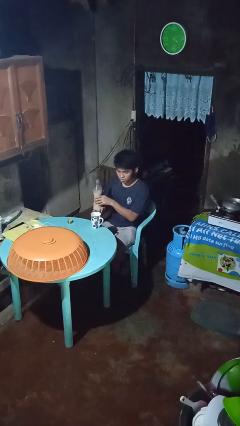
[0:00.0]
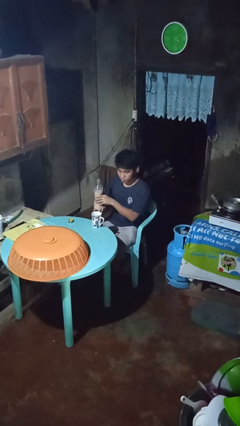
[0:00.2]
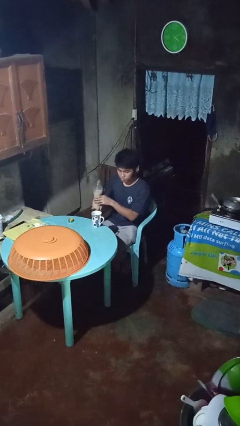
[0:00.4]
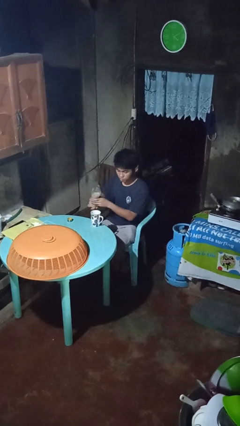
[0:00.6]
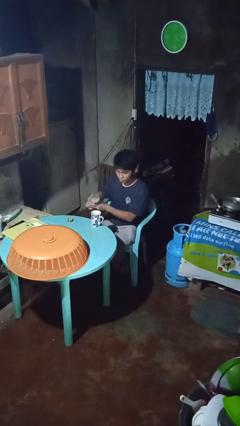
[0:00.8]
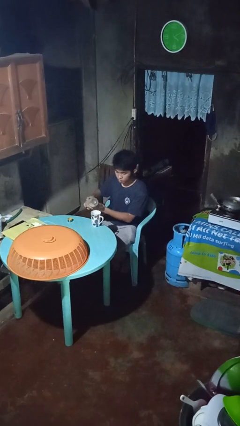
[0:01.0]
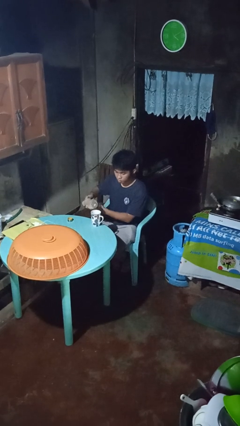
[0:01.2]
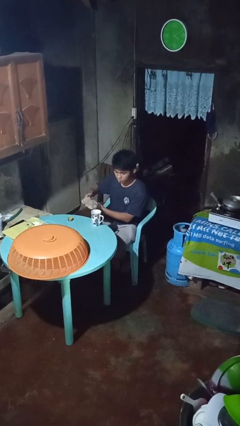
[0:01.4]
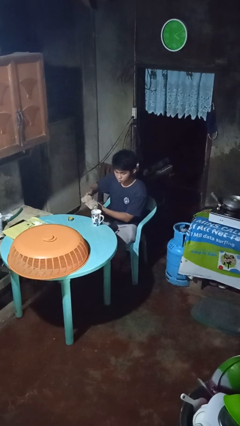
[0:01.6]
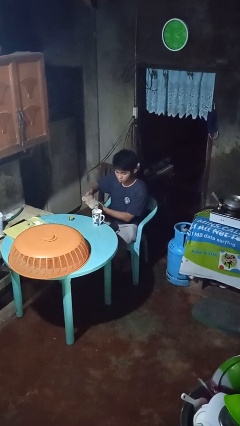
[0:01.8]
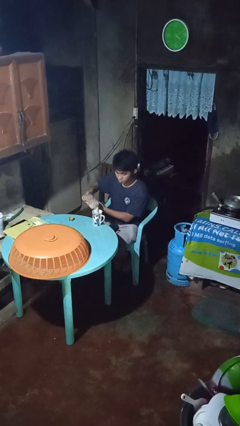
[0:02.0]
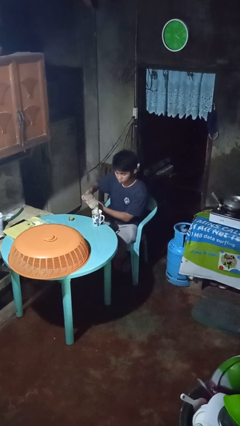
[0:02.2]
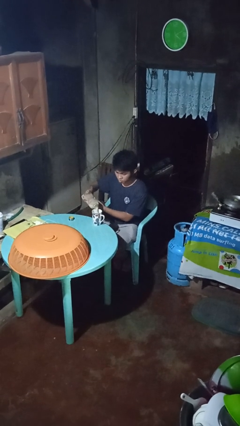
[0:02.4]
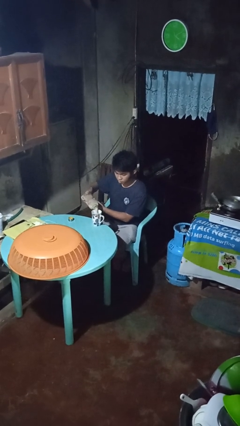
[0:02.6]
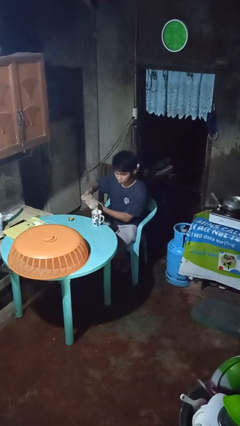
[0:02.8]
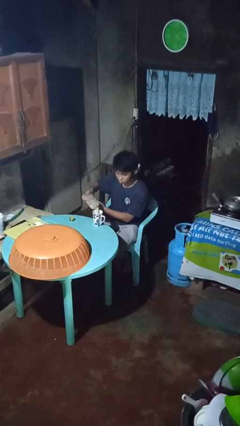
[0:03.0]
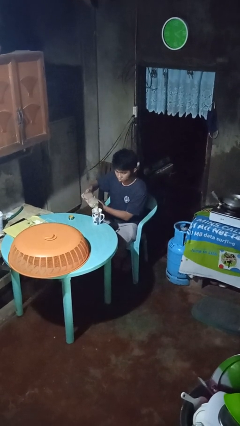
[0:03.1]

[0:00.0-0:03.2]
person pours coffee into mug

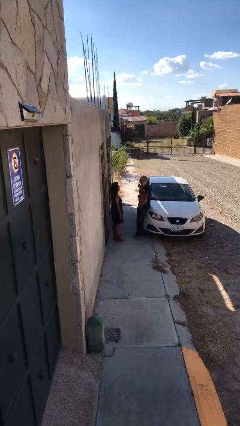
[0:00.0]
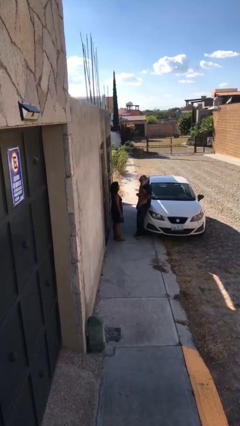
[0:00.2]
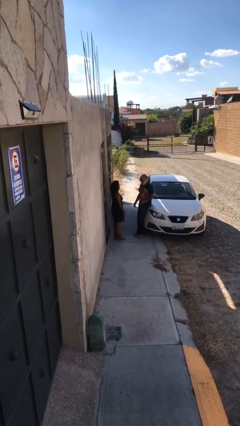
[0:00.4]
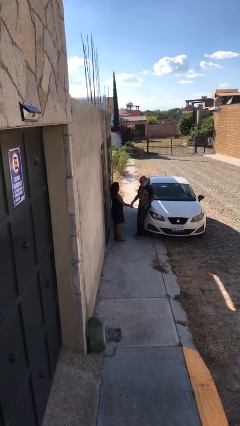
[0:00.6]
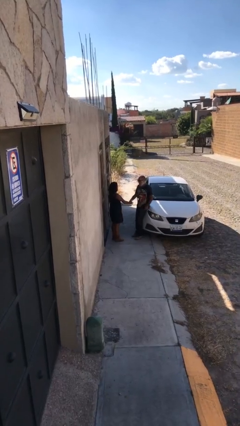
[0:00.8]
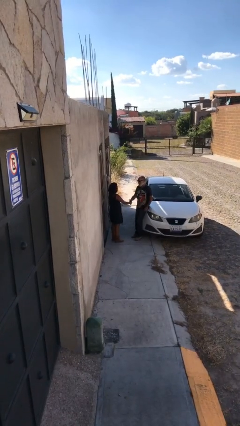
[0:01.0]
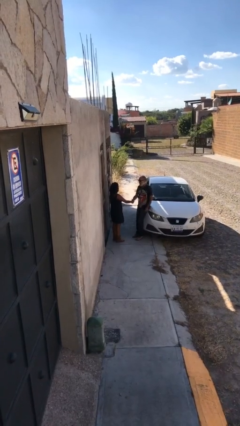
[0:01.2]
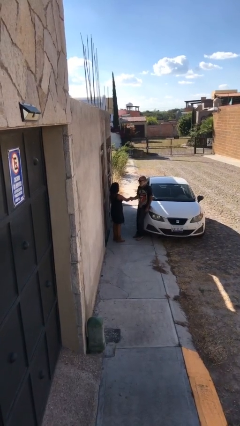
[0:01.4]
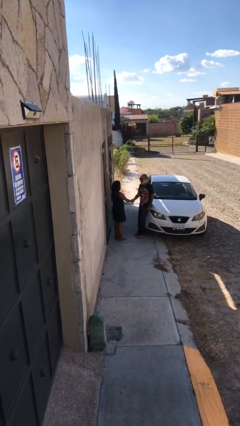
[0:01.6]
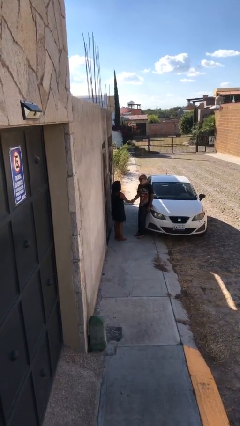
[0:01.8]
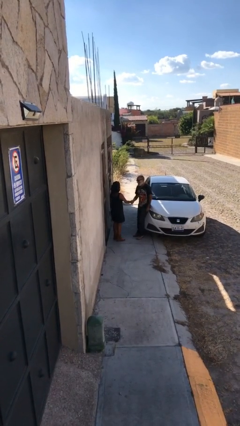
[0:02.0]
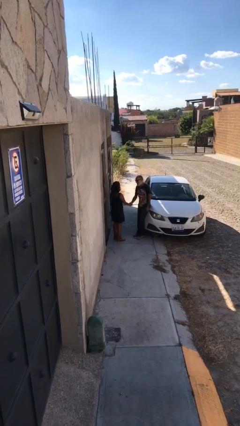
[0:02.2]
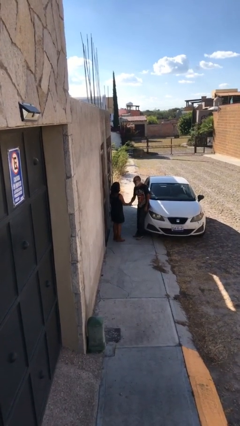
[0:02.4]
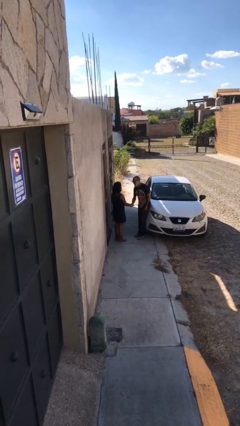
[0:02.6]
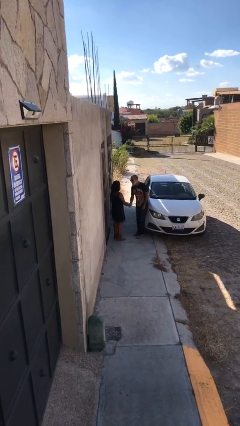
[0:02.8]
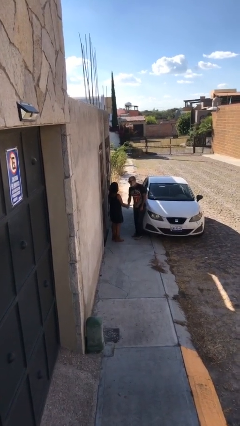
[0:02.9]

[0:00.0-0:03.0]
person shakes hand

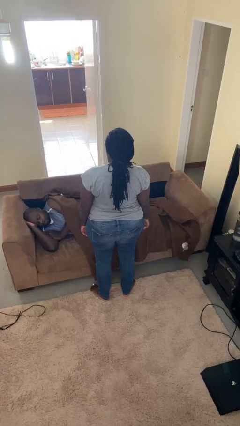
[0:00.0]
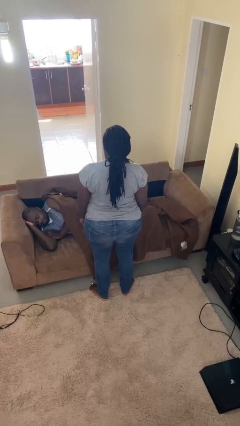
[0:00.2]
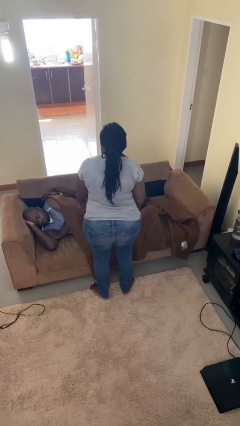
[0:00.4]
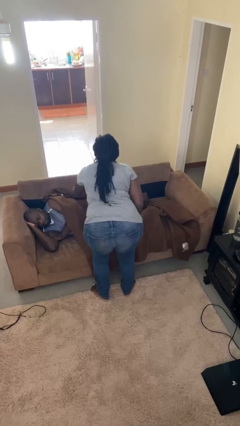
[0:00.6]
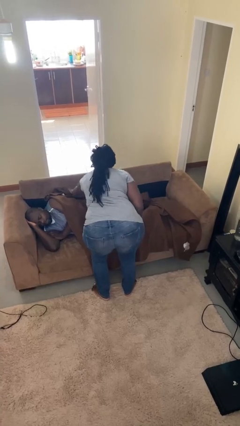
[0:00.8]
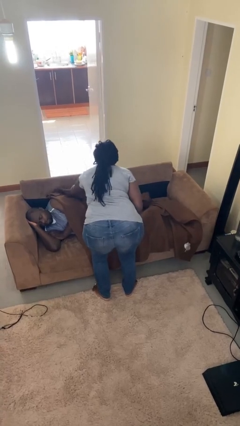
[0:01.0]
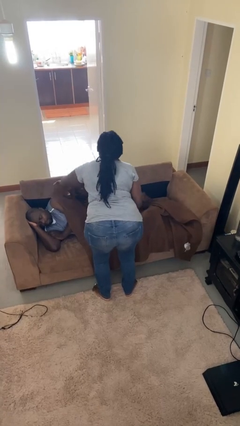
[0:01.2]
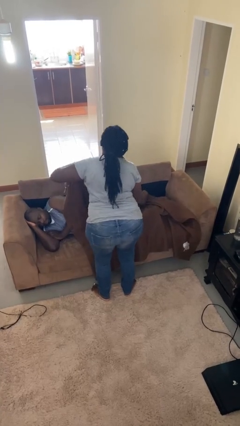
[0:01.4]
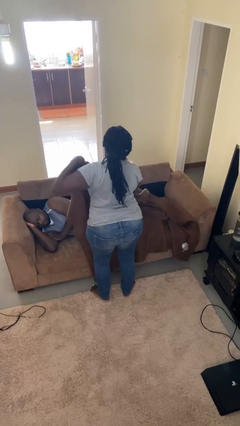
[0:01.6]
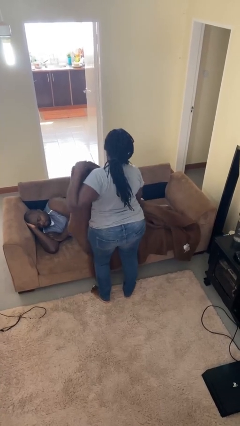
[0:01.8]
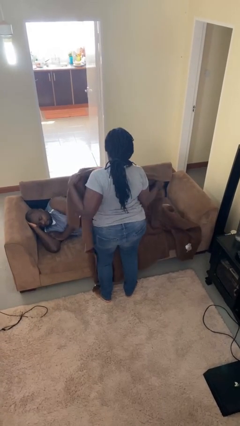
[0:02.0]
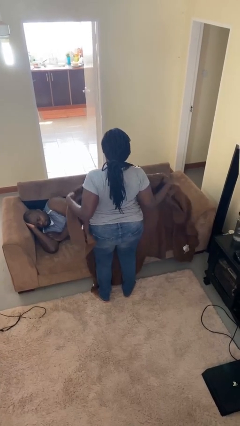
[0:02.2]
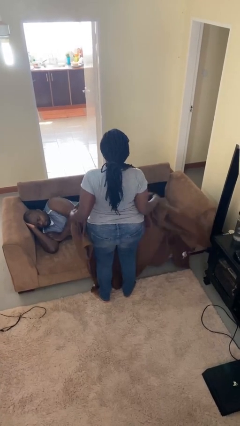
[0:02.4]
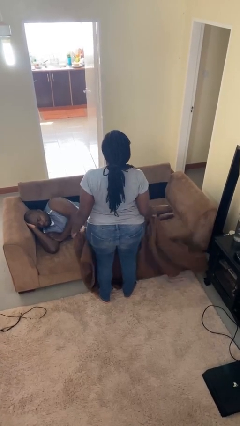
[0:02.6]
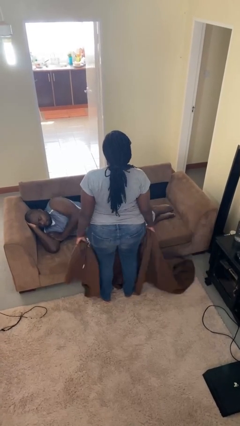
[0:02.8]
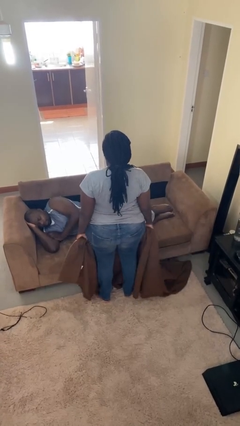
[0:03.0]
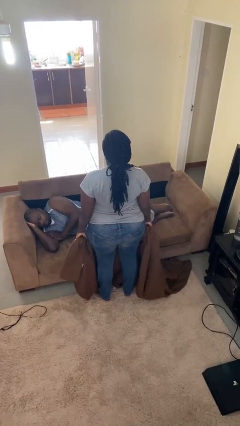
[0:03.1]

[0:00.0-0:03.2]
person uncovers friend with blanket

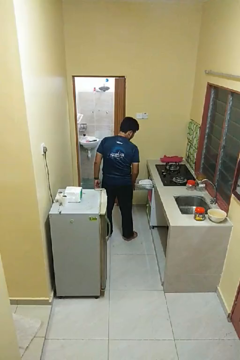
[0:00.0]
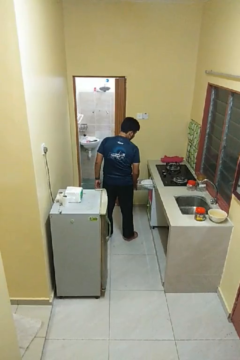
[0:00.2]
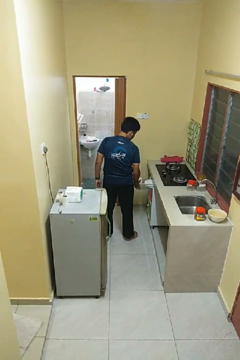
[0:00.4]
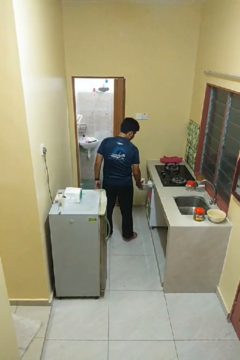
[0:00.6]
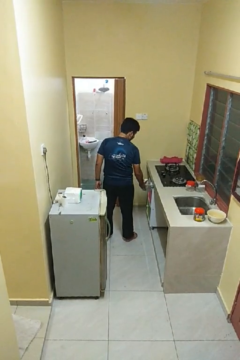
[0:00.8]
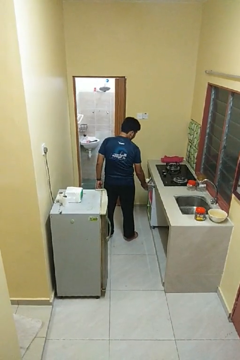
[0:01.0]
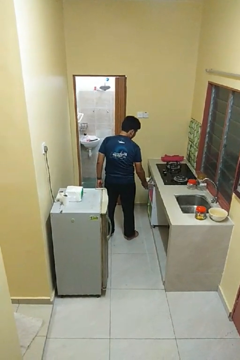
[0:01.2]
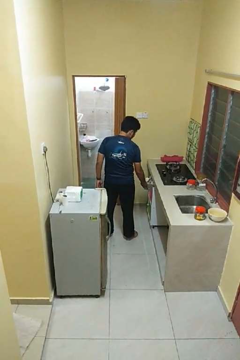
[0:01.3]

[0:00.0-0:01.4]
person closes kitchen drawer

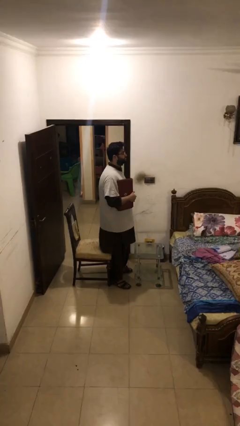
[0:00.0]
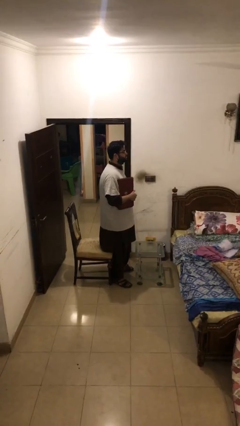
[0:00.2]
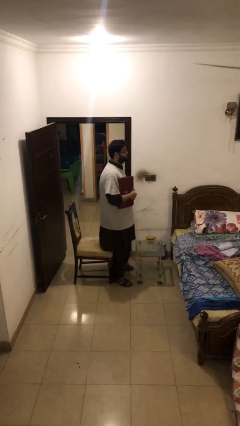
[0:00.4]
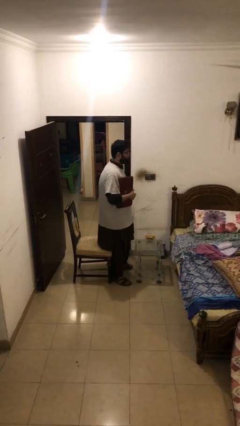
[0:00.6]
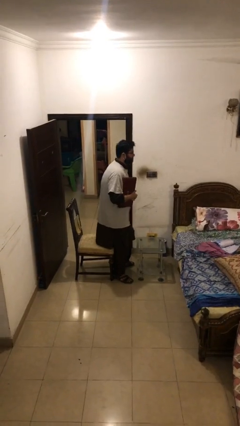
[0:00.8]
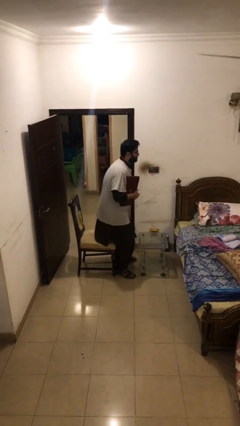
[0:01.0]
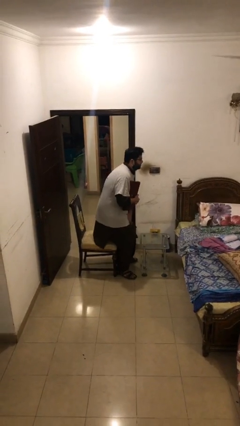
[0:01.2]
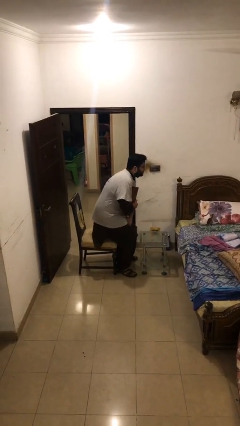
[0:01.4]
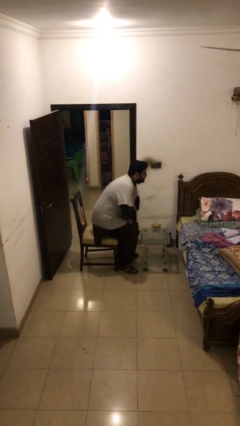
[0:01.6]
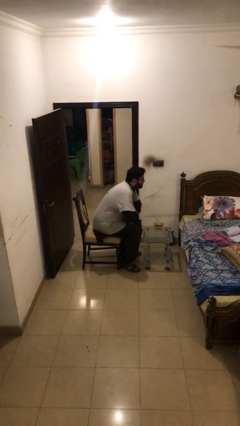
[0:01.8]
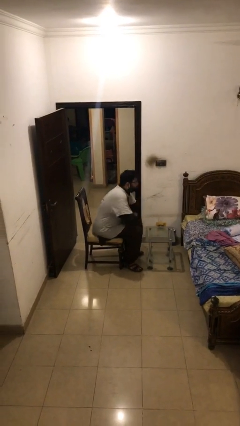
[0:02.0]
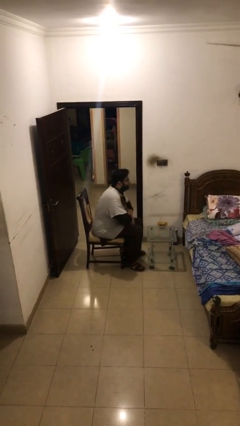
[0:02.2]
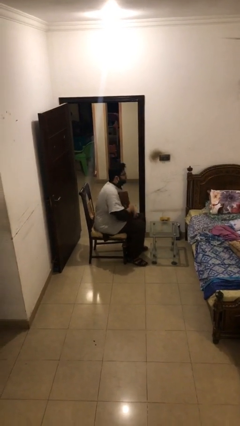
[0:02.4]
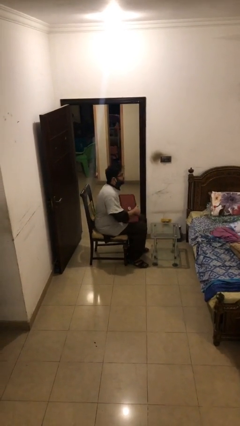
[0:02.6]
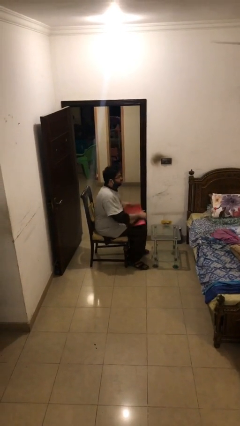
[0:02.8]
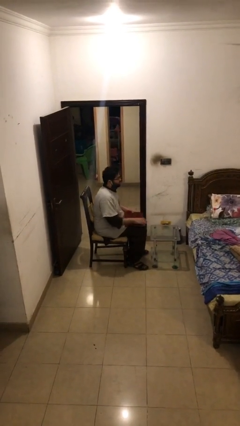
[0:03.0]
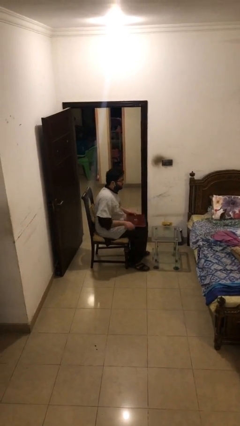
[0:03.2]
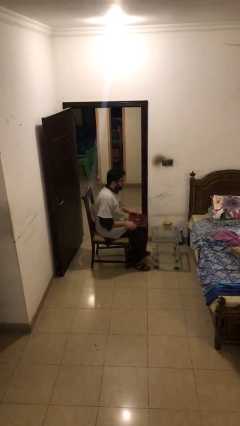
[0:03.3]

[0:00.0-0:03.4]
person sits down

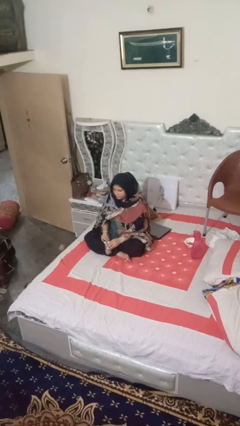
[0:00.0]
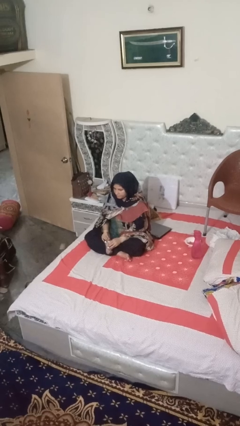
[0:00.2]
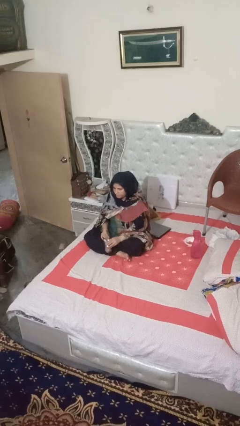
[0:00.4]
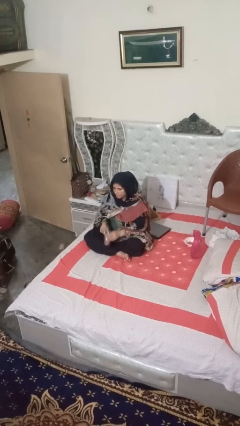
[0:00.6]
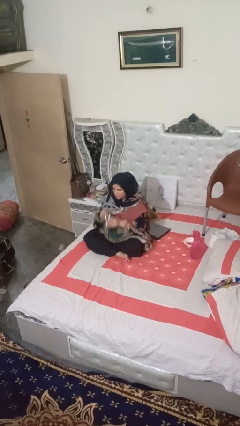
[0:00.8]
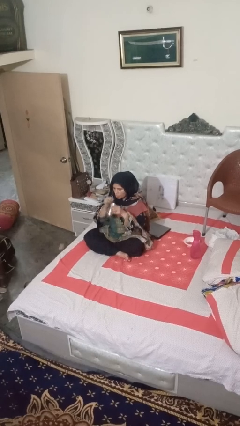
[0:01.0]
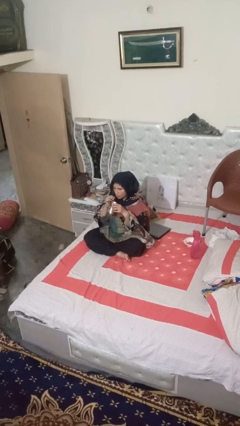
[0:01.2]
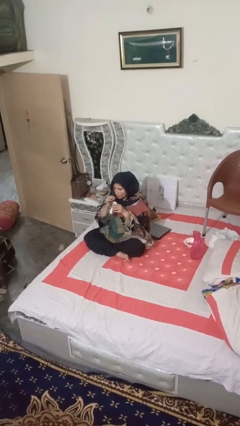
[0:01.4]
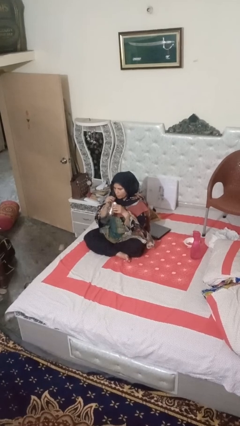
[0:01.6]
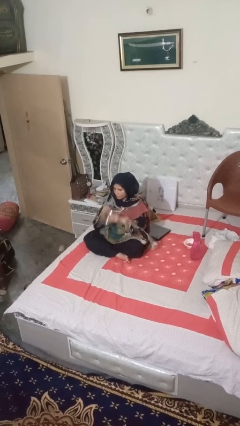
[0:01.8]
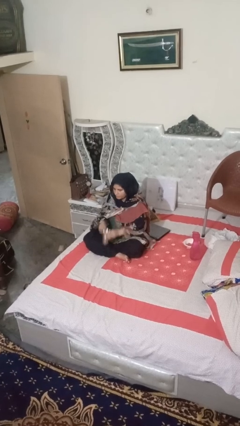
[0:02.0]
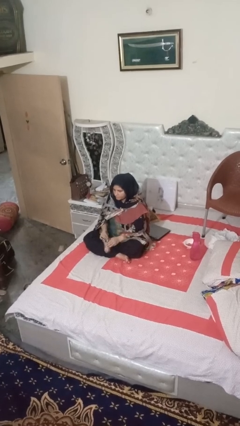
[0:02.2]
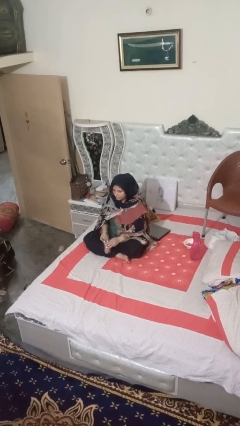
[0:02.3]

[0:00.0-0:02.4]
person drinks from straw

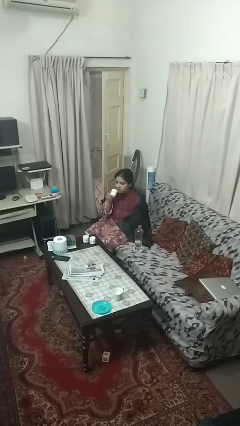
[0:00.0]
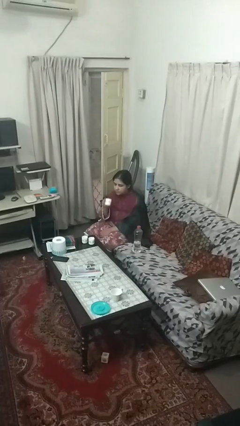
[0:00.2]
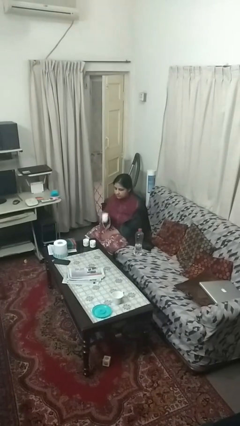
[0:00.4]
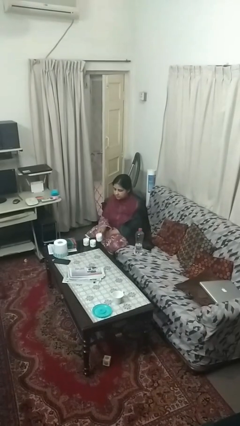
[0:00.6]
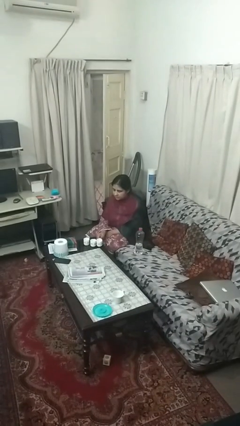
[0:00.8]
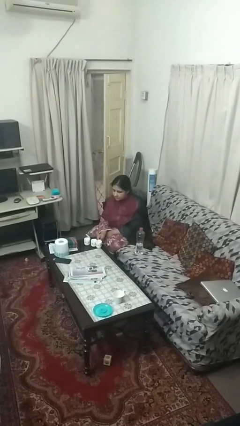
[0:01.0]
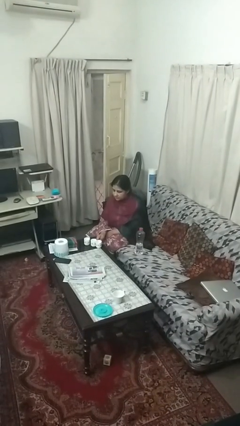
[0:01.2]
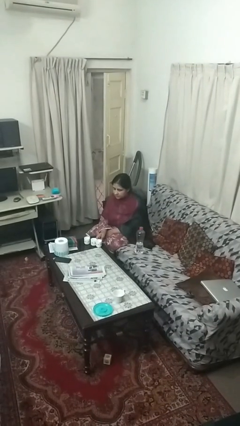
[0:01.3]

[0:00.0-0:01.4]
person puts down object on table
